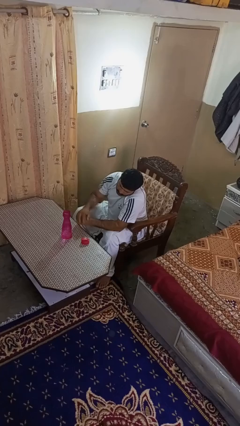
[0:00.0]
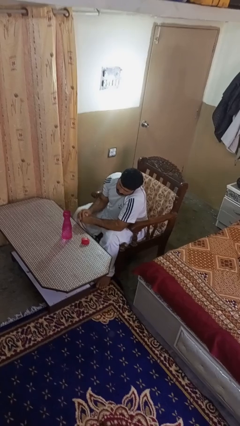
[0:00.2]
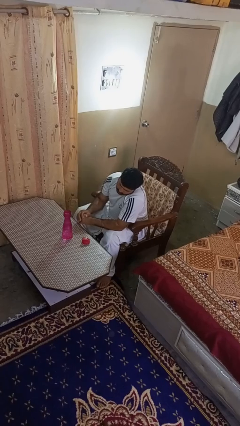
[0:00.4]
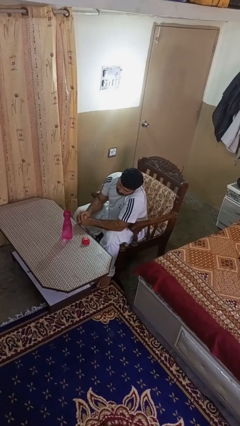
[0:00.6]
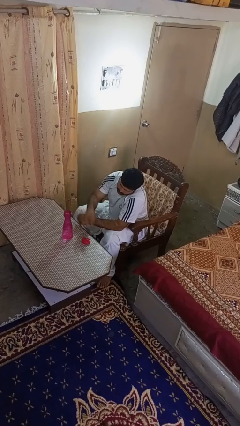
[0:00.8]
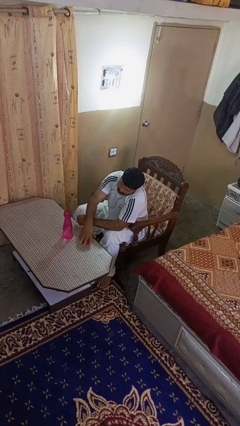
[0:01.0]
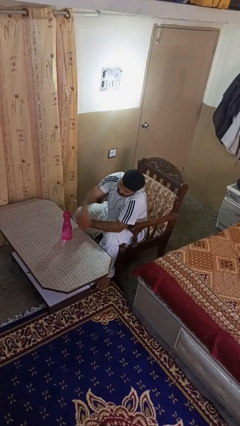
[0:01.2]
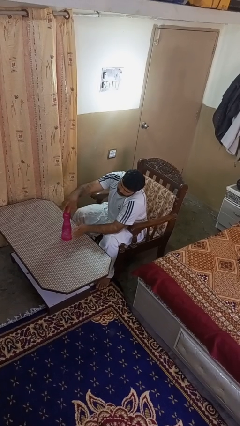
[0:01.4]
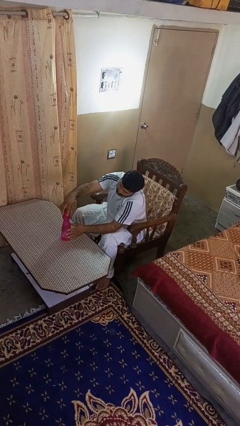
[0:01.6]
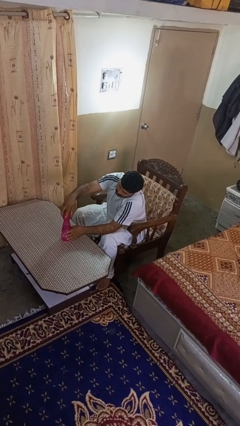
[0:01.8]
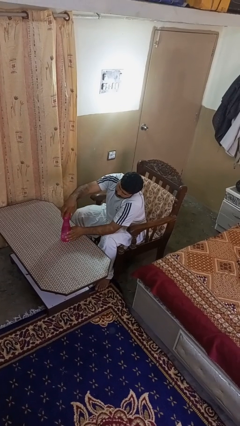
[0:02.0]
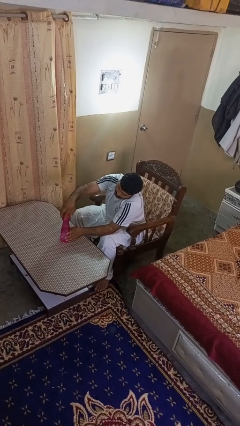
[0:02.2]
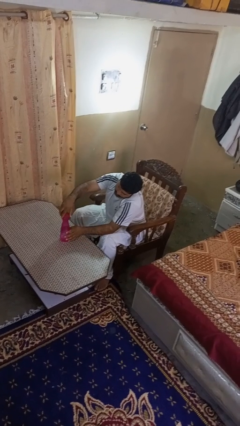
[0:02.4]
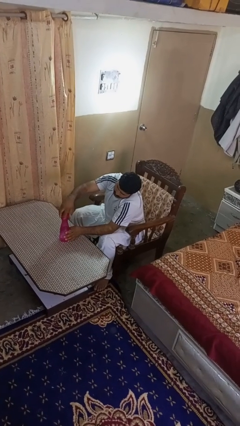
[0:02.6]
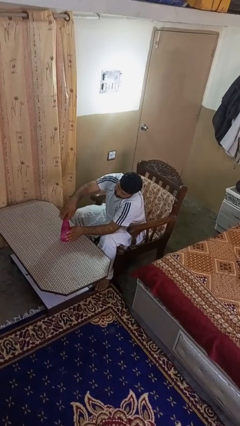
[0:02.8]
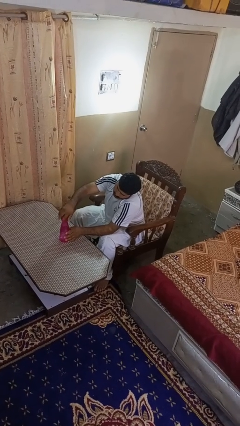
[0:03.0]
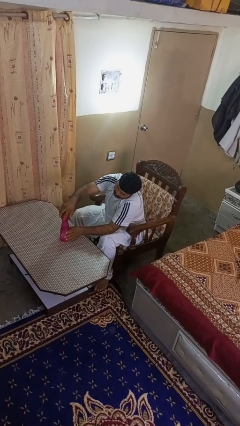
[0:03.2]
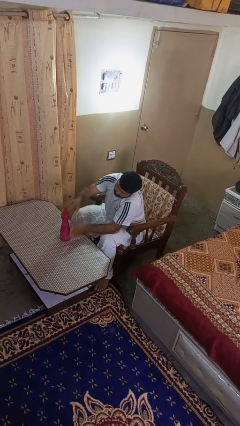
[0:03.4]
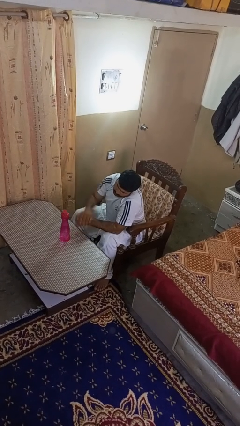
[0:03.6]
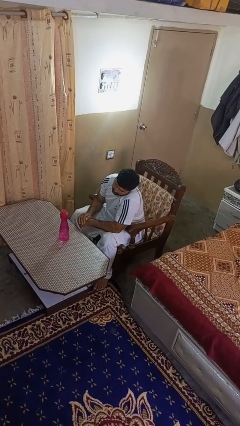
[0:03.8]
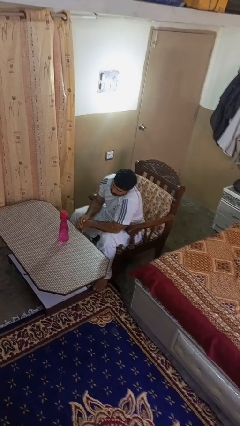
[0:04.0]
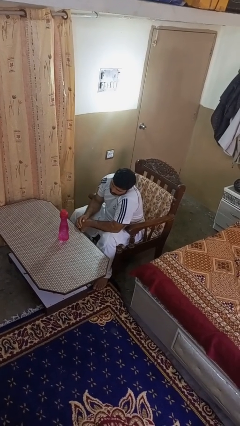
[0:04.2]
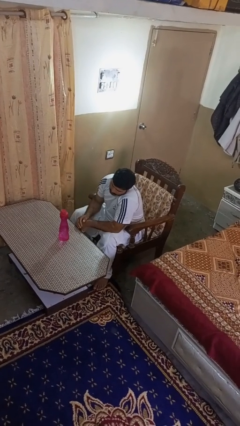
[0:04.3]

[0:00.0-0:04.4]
person screws lid to bottle

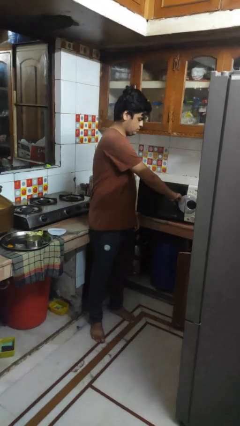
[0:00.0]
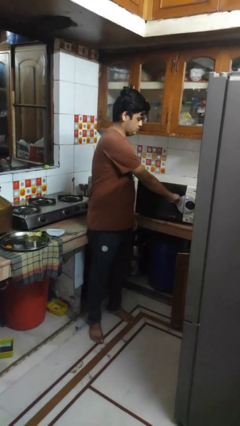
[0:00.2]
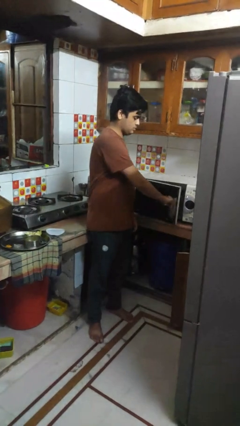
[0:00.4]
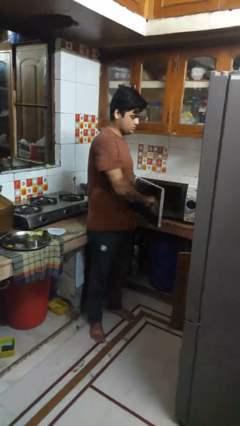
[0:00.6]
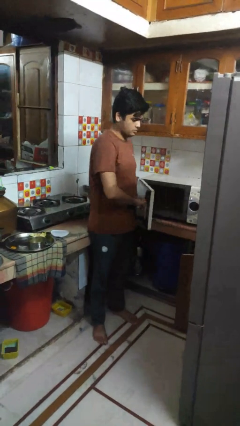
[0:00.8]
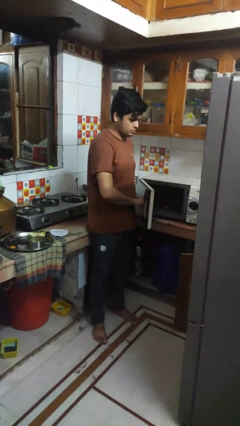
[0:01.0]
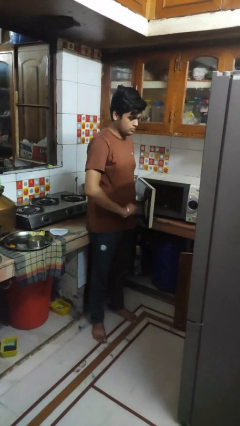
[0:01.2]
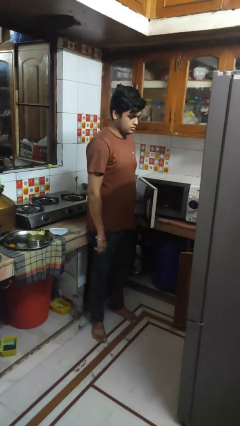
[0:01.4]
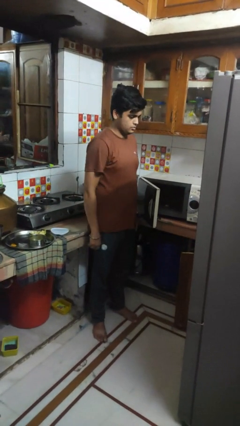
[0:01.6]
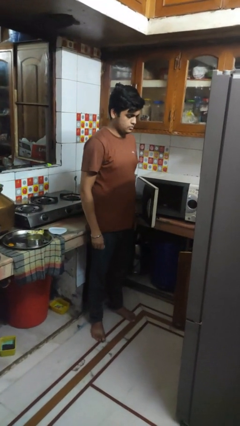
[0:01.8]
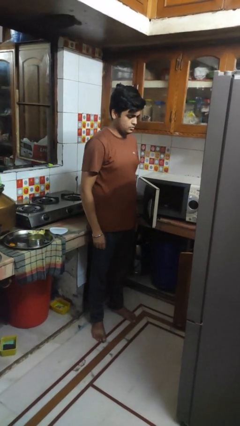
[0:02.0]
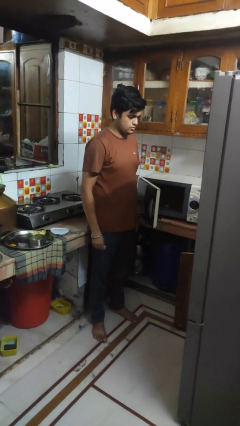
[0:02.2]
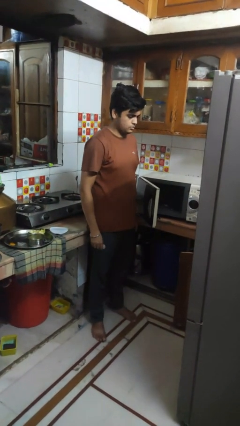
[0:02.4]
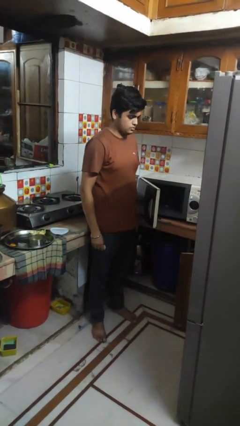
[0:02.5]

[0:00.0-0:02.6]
person opens oven door

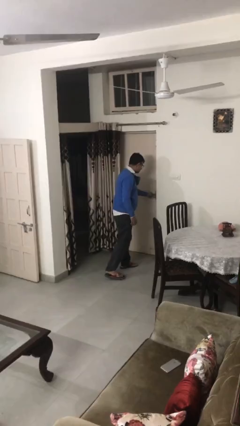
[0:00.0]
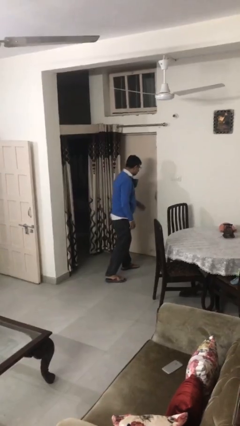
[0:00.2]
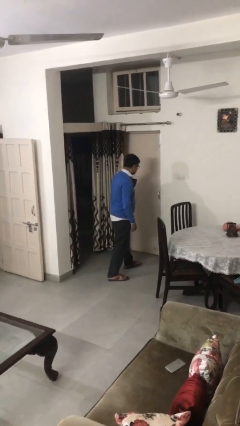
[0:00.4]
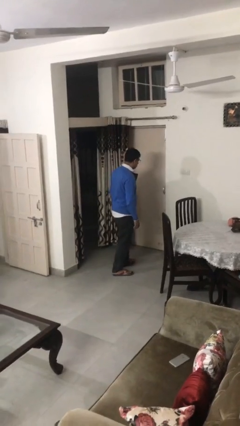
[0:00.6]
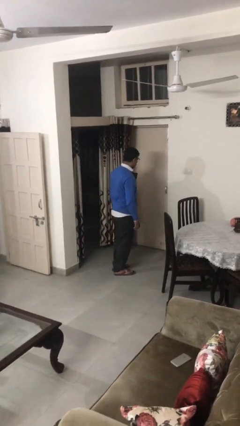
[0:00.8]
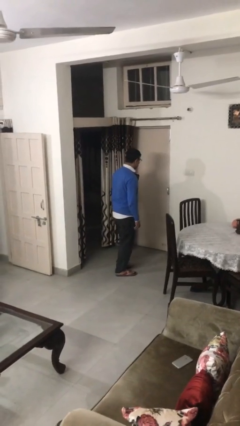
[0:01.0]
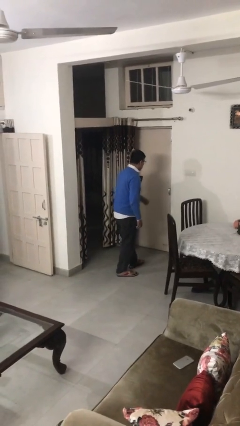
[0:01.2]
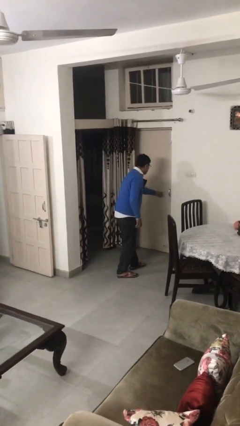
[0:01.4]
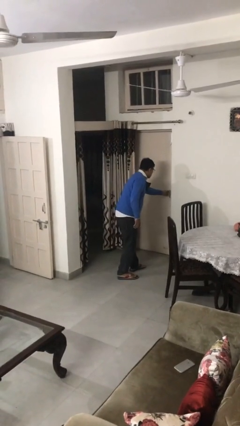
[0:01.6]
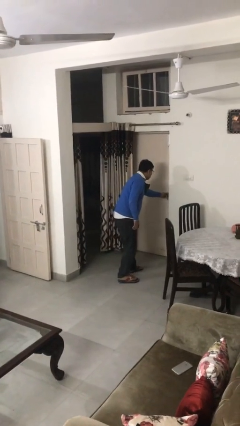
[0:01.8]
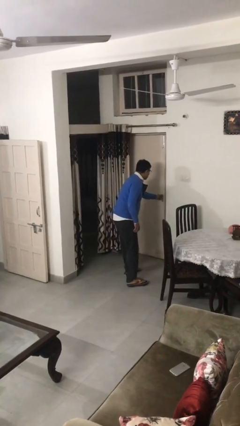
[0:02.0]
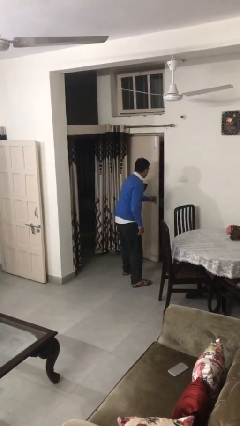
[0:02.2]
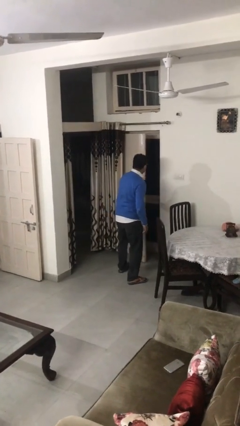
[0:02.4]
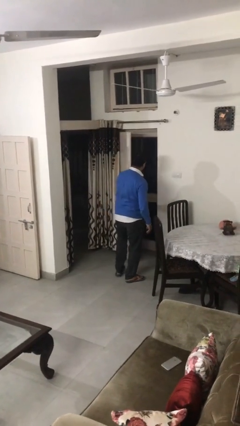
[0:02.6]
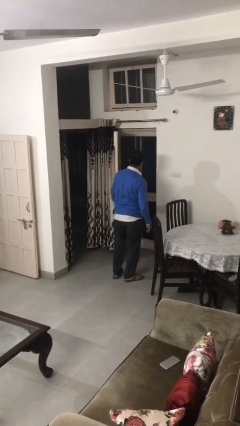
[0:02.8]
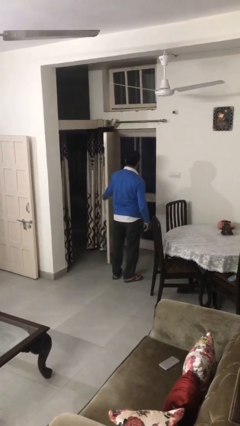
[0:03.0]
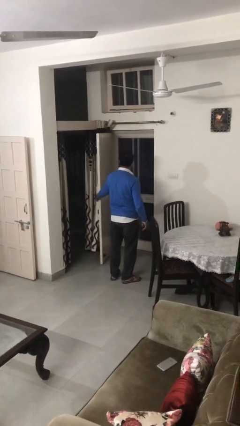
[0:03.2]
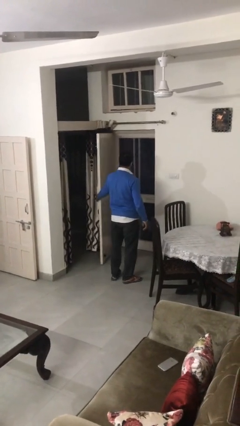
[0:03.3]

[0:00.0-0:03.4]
person opens facility door

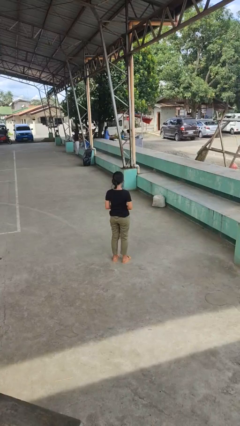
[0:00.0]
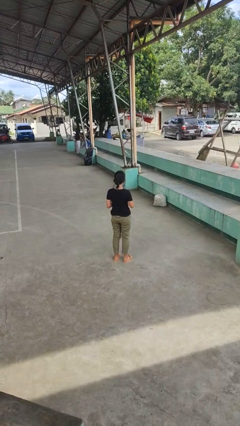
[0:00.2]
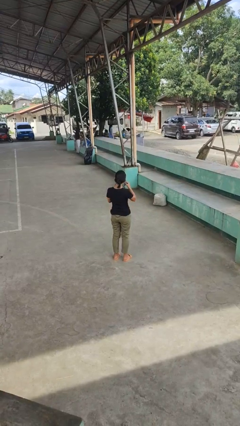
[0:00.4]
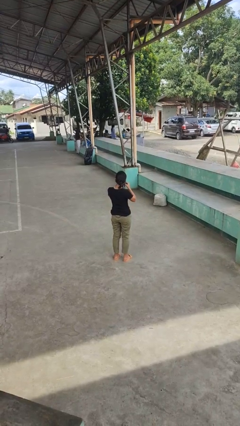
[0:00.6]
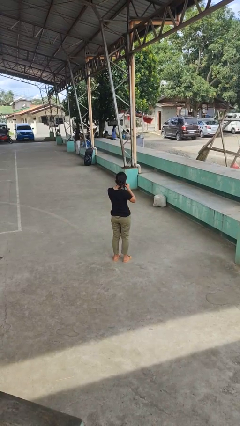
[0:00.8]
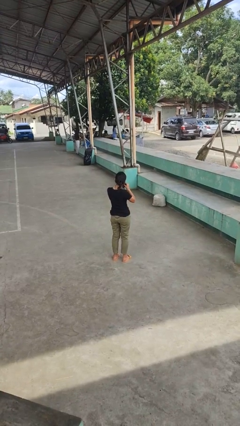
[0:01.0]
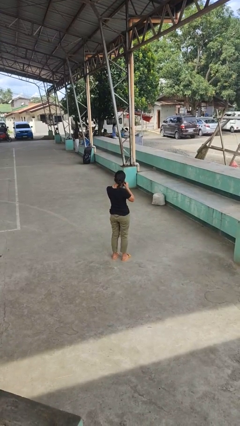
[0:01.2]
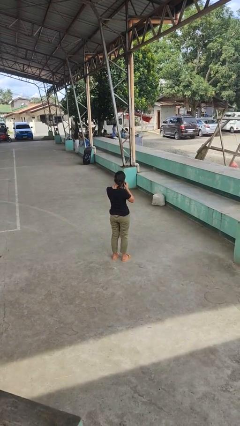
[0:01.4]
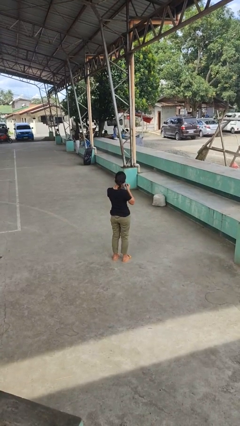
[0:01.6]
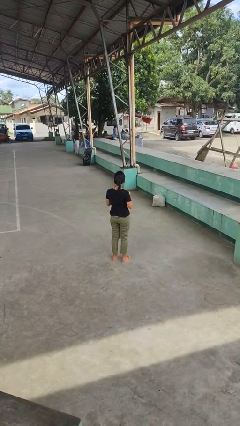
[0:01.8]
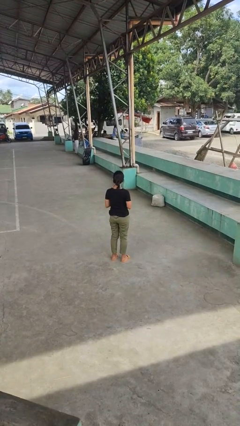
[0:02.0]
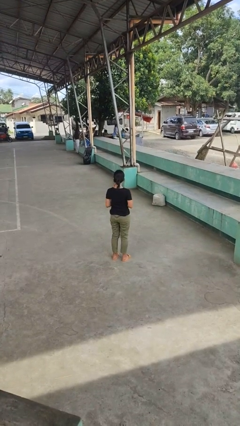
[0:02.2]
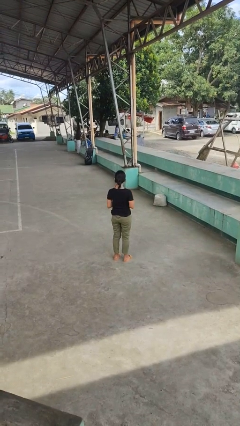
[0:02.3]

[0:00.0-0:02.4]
person takes off earrings

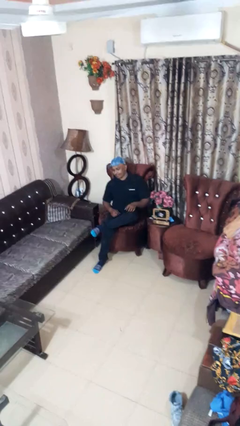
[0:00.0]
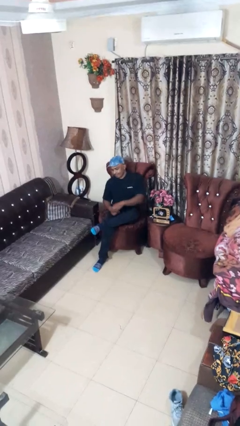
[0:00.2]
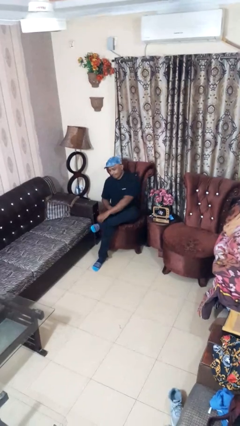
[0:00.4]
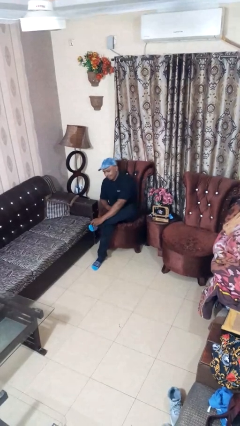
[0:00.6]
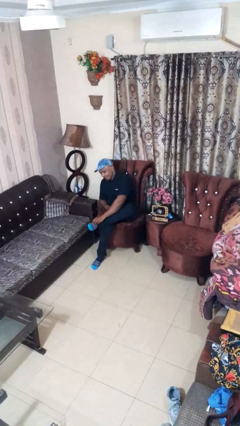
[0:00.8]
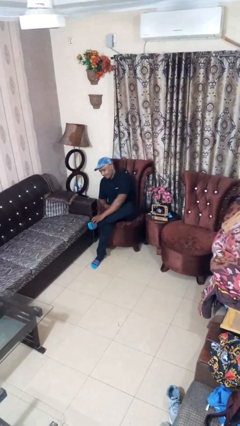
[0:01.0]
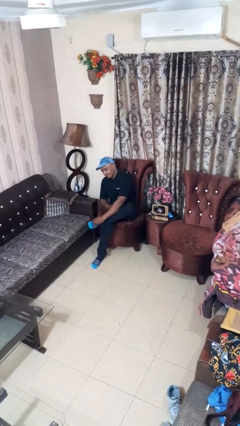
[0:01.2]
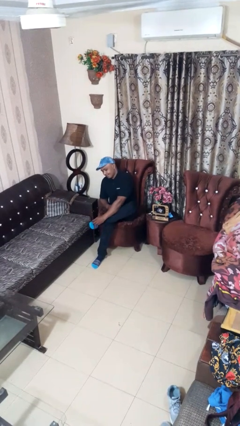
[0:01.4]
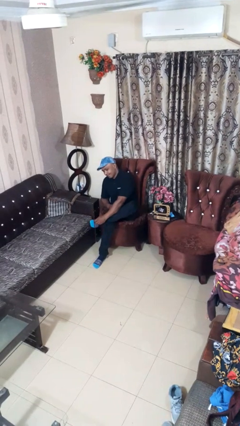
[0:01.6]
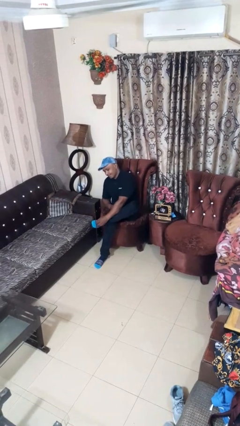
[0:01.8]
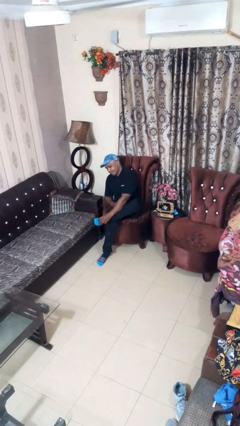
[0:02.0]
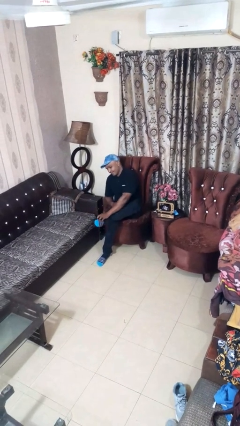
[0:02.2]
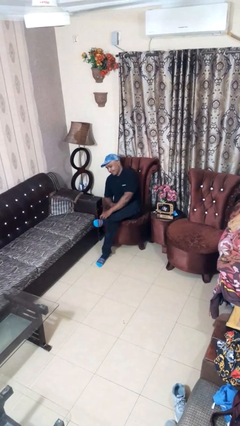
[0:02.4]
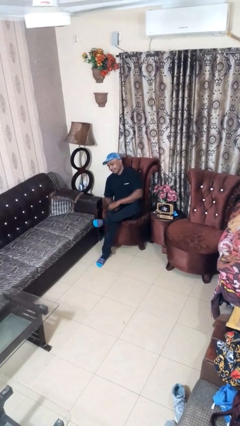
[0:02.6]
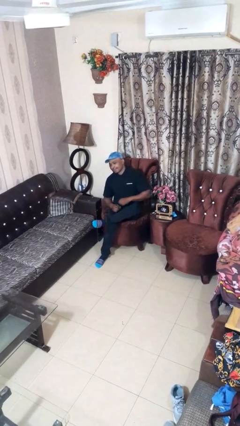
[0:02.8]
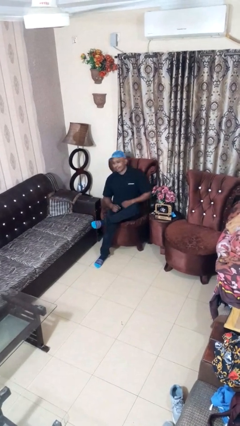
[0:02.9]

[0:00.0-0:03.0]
person rubs foot

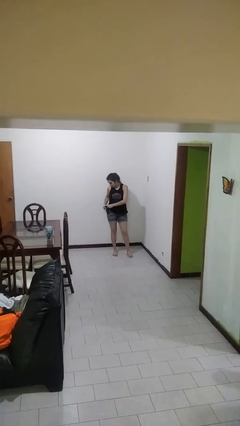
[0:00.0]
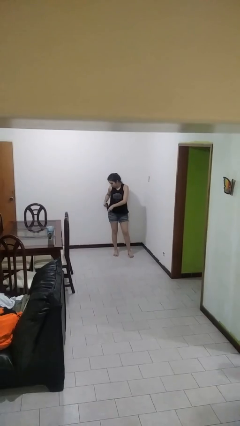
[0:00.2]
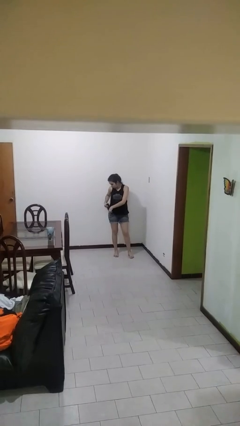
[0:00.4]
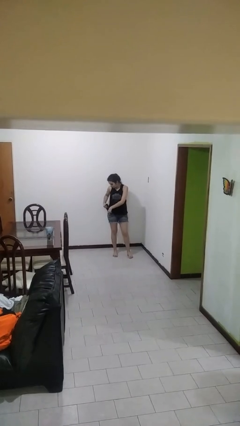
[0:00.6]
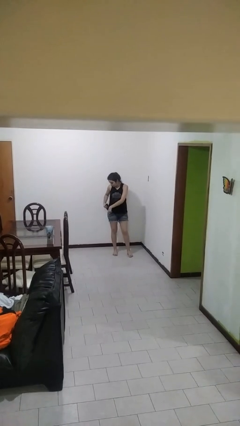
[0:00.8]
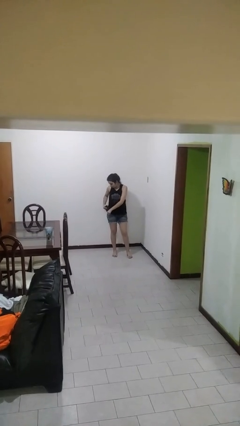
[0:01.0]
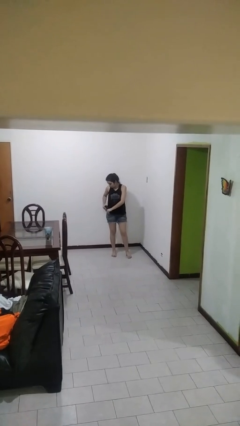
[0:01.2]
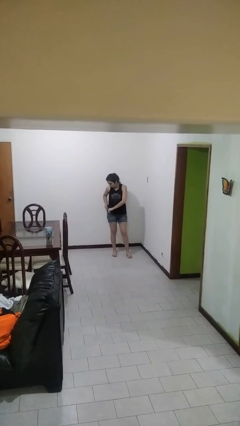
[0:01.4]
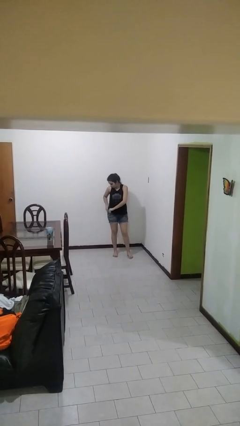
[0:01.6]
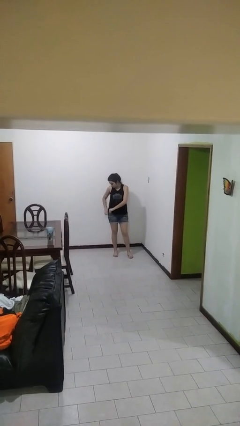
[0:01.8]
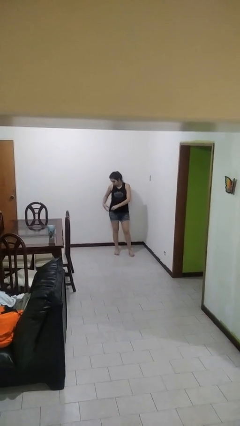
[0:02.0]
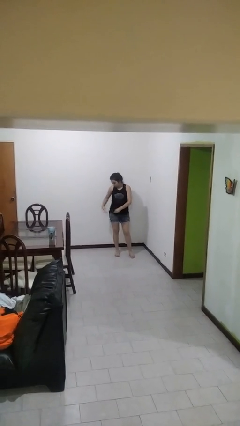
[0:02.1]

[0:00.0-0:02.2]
person puts phone into pocket
